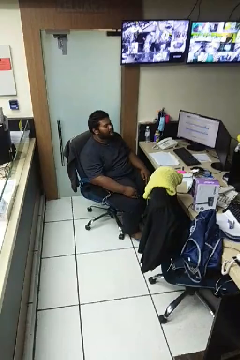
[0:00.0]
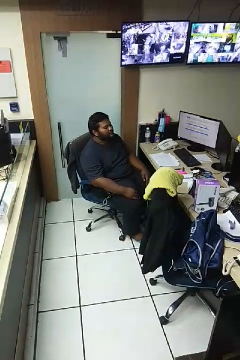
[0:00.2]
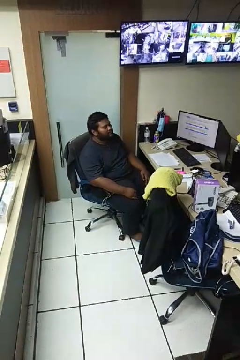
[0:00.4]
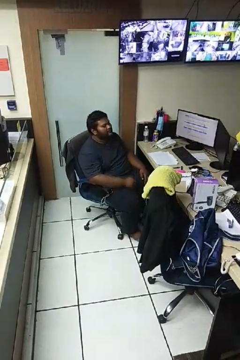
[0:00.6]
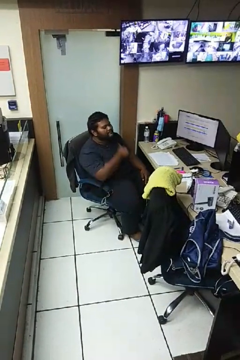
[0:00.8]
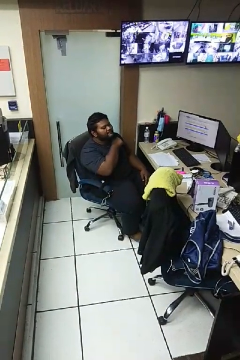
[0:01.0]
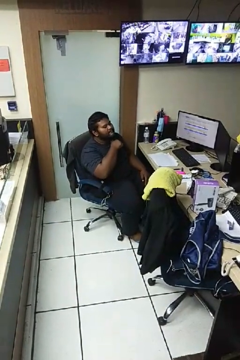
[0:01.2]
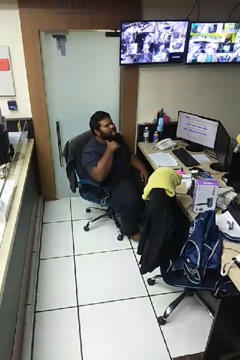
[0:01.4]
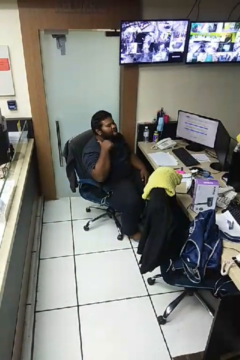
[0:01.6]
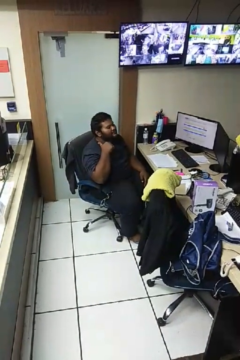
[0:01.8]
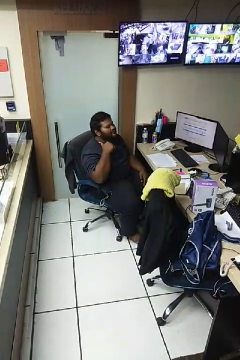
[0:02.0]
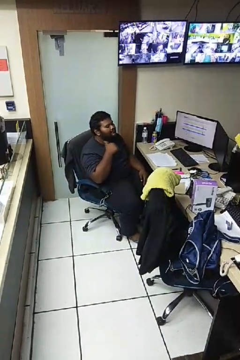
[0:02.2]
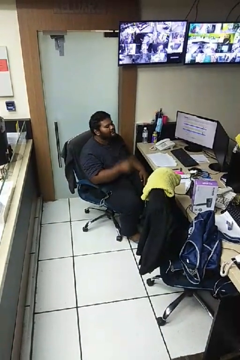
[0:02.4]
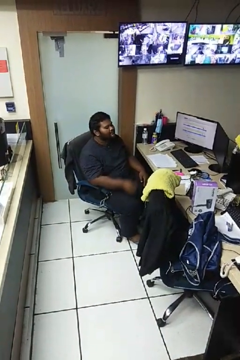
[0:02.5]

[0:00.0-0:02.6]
person gestures cut

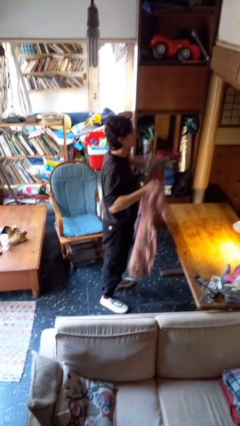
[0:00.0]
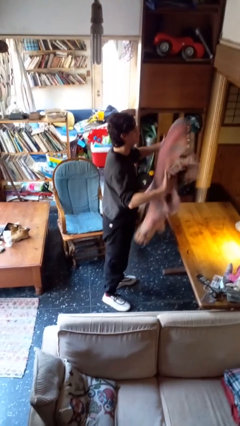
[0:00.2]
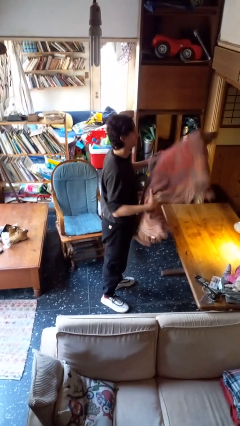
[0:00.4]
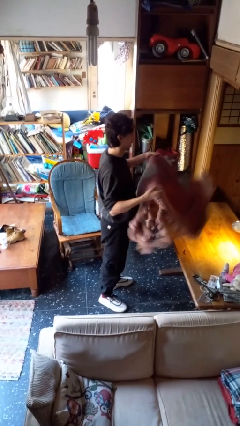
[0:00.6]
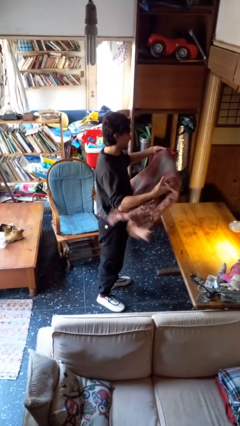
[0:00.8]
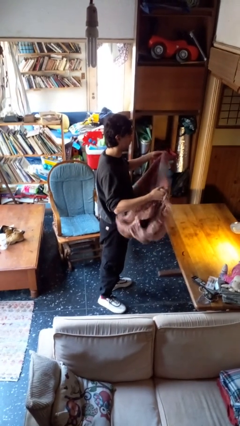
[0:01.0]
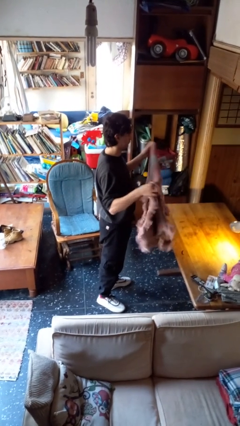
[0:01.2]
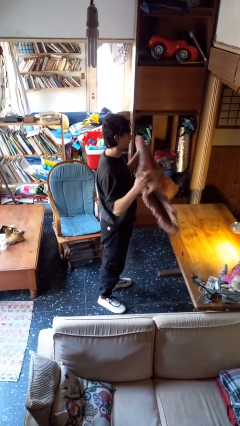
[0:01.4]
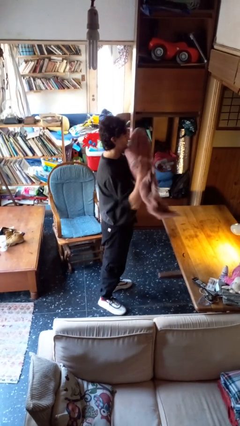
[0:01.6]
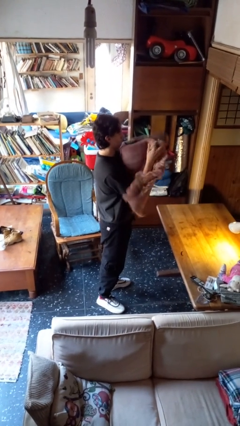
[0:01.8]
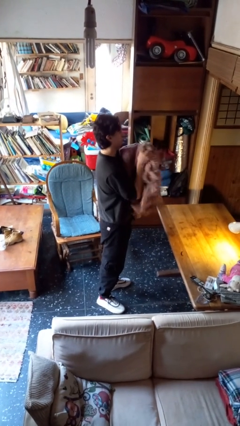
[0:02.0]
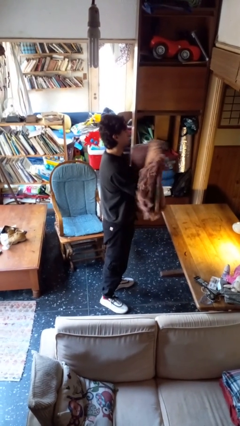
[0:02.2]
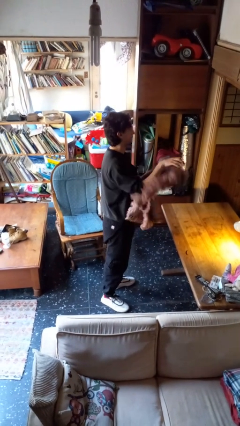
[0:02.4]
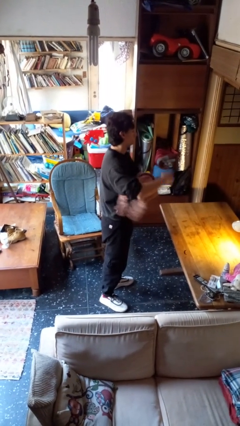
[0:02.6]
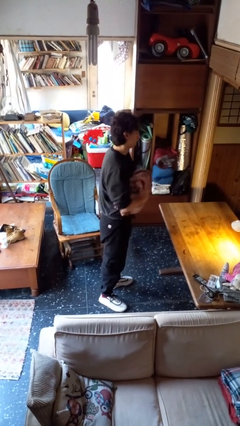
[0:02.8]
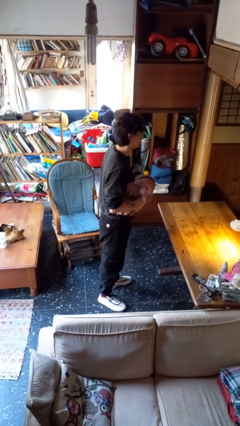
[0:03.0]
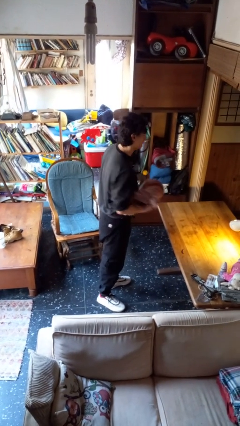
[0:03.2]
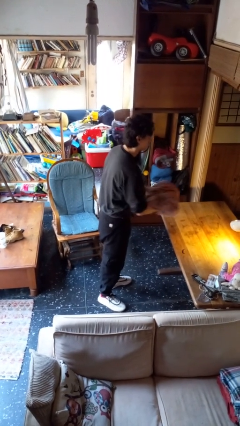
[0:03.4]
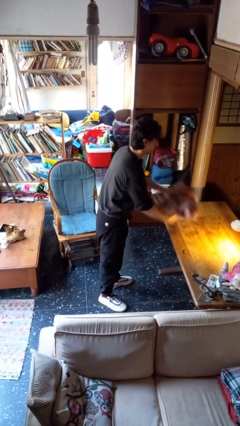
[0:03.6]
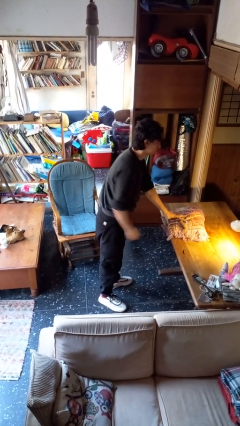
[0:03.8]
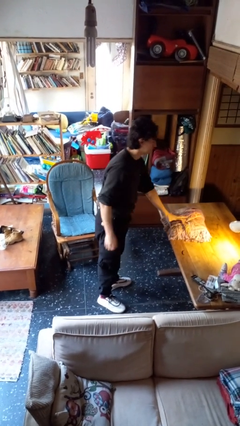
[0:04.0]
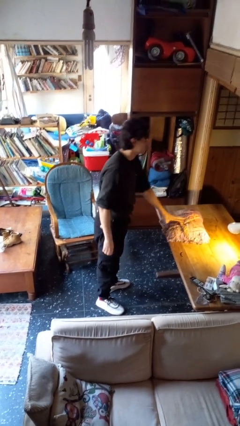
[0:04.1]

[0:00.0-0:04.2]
person folds blanket

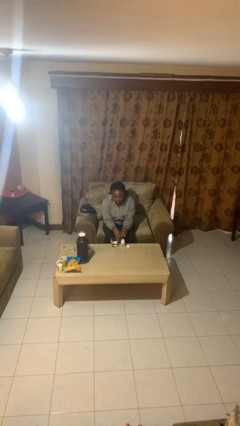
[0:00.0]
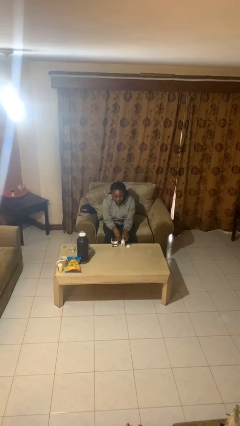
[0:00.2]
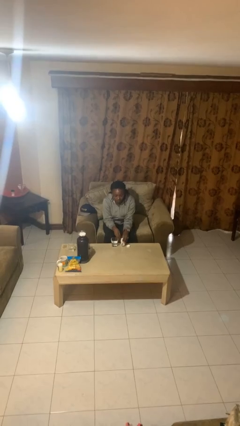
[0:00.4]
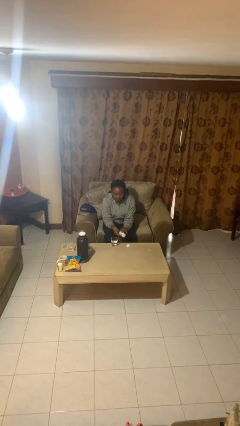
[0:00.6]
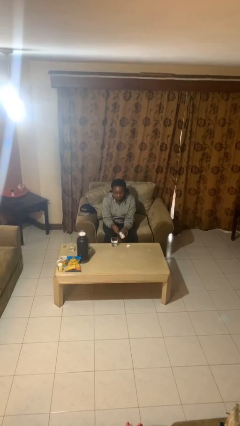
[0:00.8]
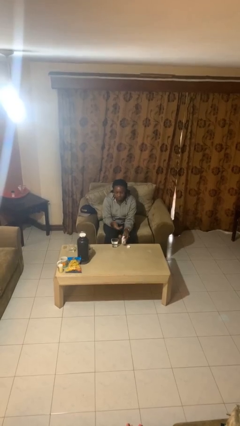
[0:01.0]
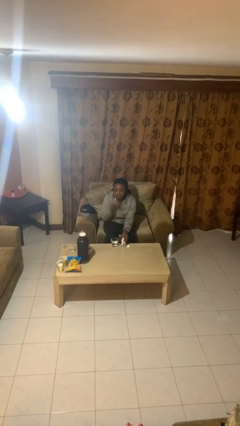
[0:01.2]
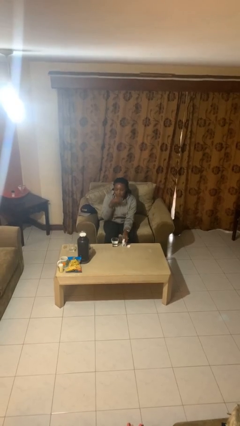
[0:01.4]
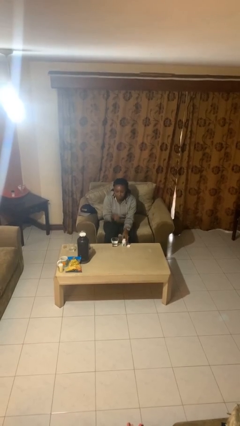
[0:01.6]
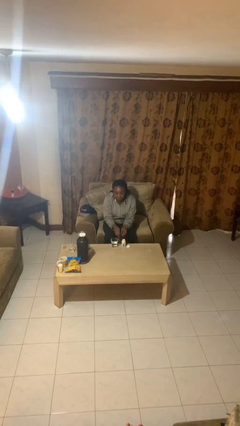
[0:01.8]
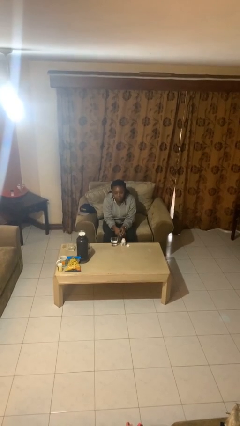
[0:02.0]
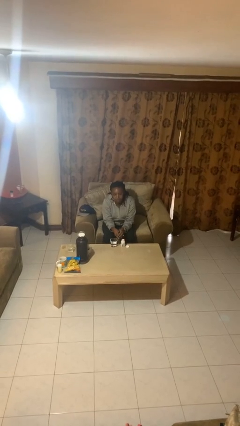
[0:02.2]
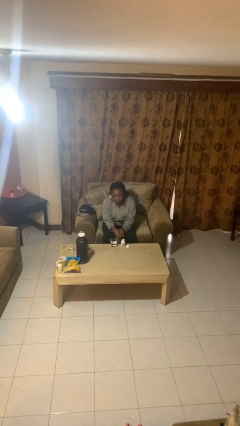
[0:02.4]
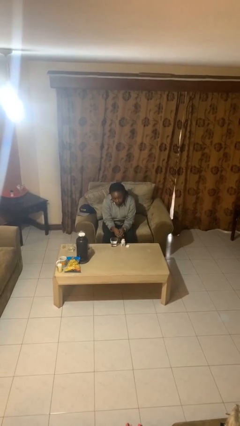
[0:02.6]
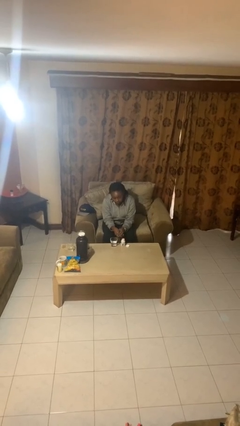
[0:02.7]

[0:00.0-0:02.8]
person takes medicine pills

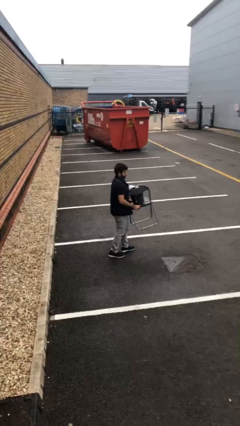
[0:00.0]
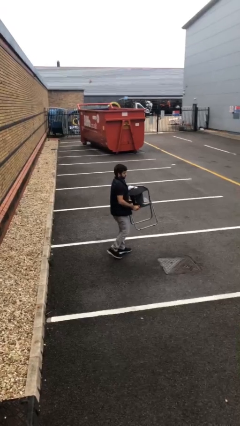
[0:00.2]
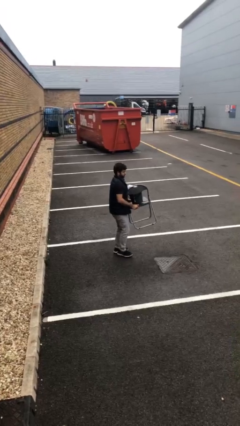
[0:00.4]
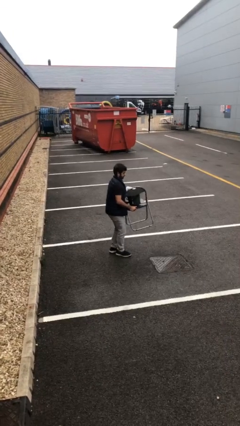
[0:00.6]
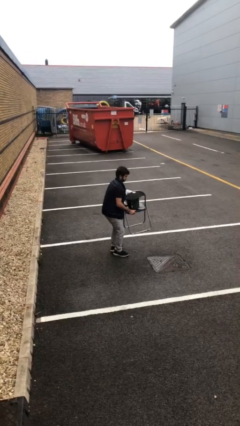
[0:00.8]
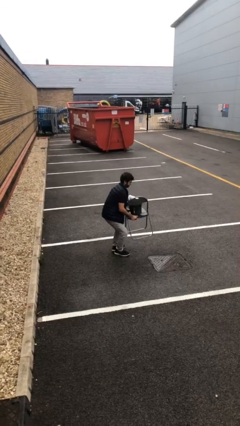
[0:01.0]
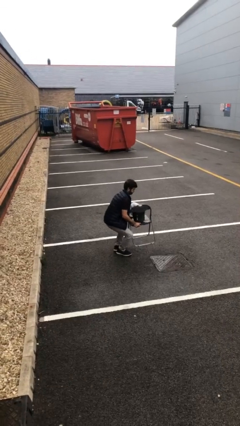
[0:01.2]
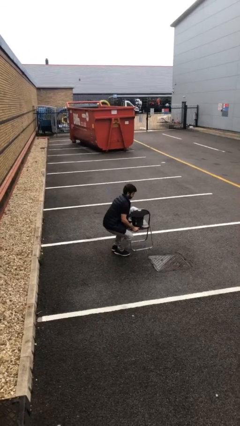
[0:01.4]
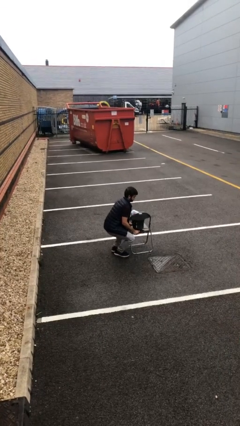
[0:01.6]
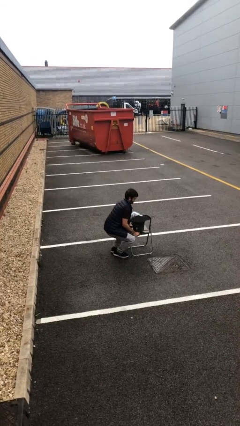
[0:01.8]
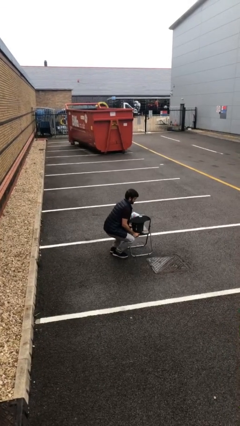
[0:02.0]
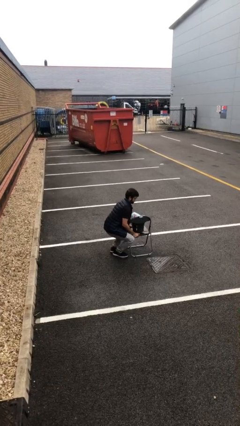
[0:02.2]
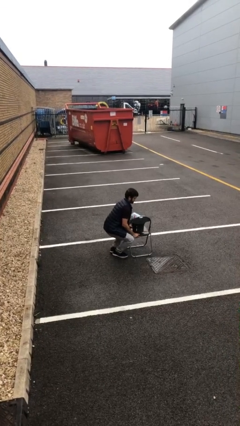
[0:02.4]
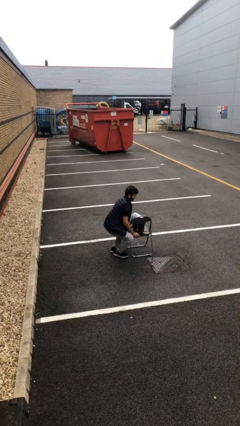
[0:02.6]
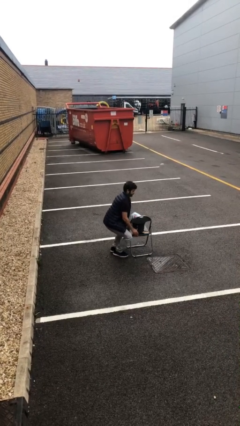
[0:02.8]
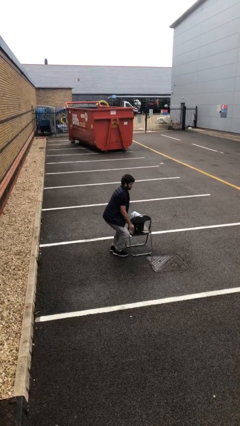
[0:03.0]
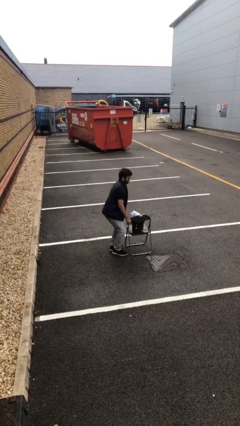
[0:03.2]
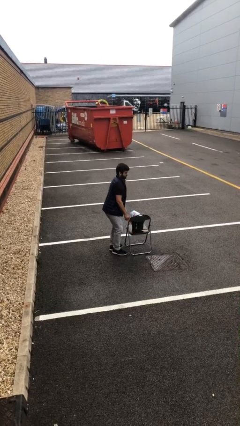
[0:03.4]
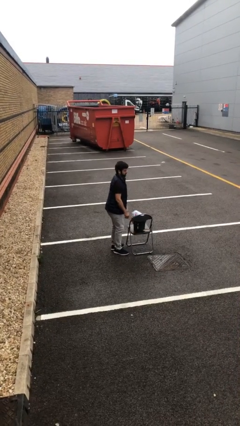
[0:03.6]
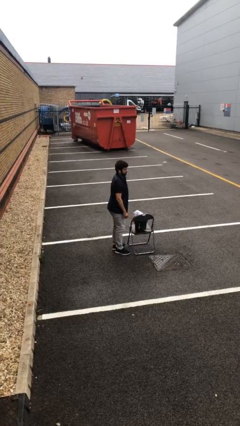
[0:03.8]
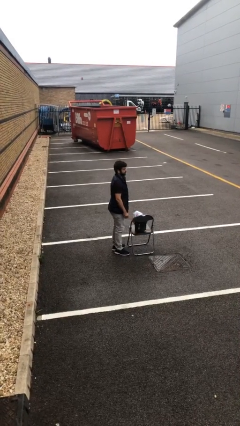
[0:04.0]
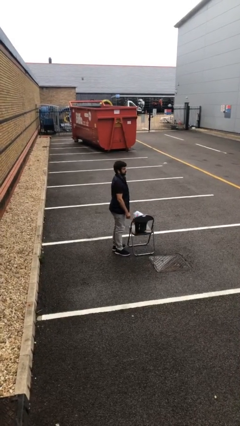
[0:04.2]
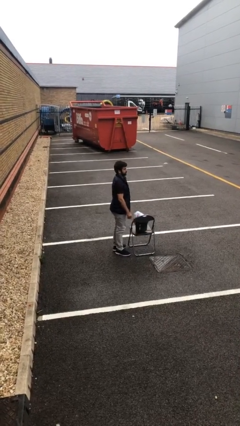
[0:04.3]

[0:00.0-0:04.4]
person puts down object on floor

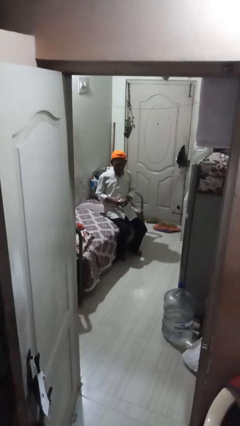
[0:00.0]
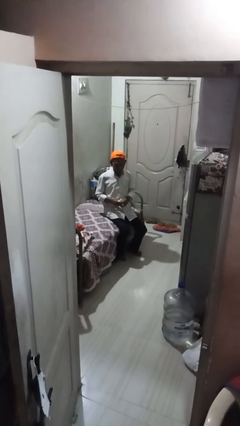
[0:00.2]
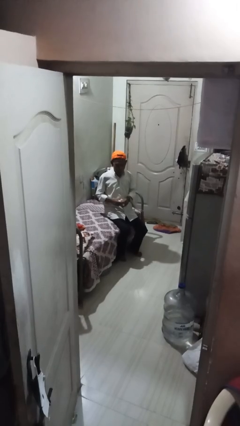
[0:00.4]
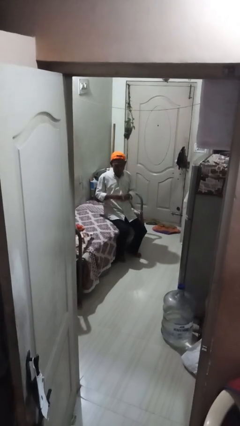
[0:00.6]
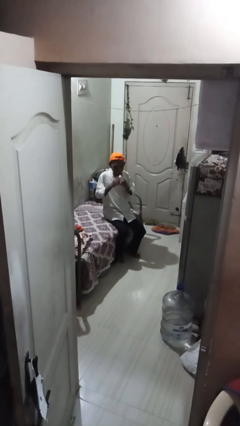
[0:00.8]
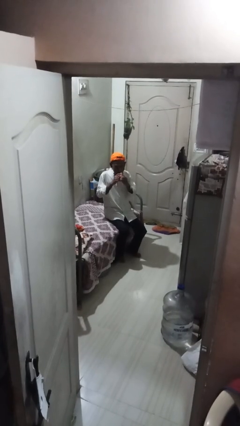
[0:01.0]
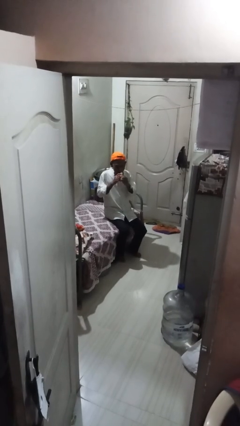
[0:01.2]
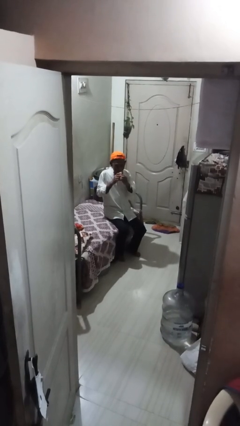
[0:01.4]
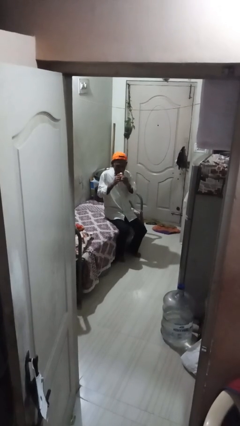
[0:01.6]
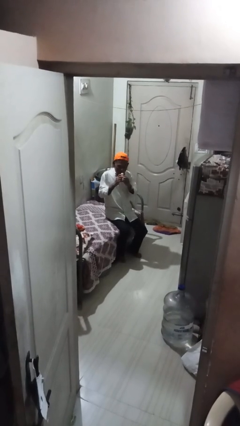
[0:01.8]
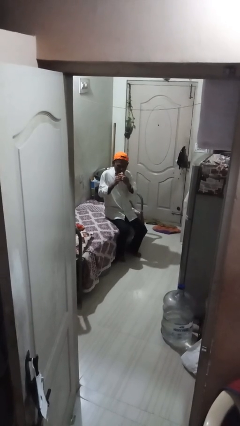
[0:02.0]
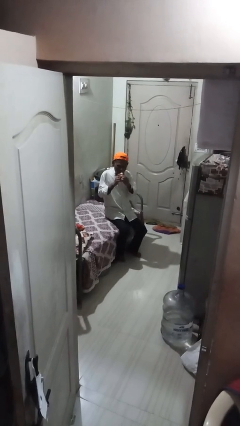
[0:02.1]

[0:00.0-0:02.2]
person eats banana

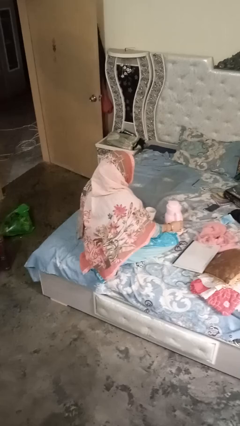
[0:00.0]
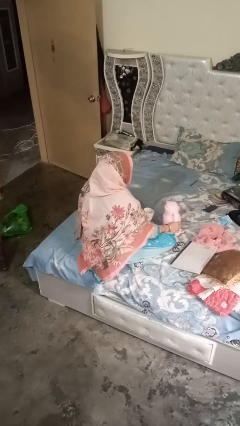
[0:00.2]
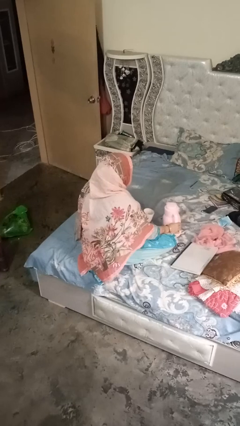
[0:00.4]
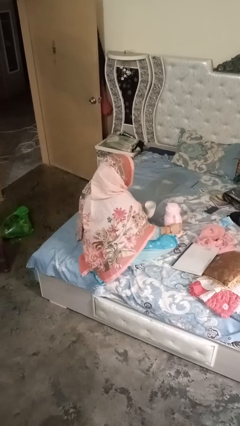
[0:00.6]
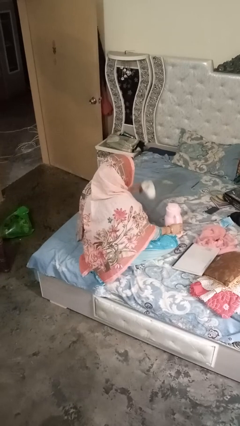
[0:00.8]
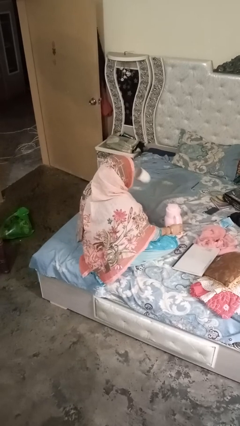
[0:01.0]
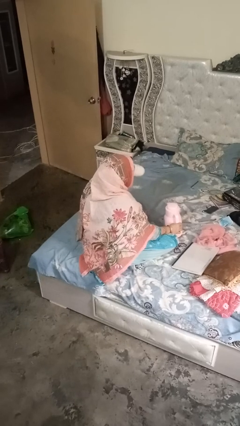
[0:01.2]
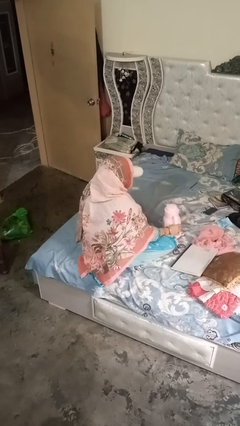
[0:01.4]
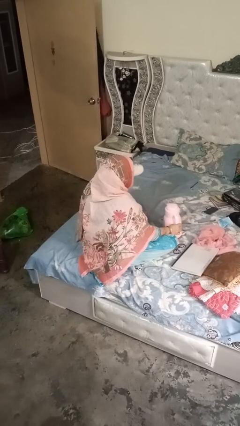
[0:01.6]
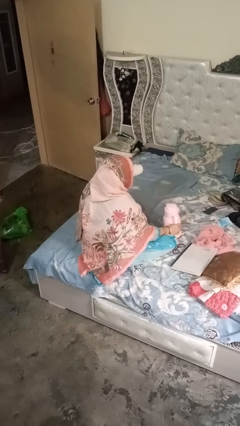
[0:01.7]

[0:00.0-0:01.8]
person pours coffee into mug
